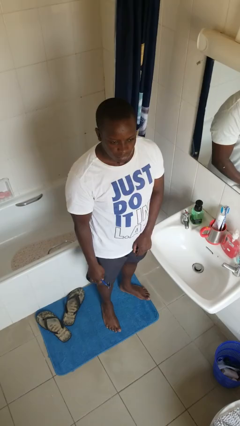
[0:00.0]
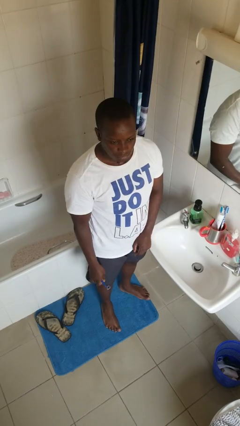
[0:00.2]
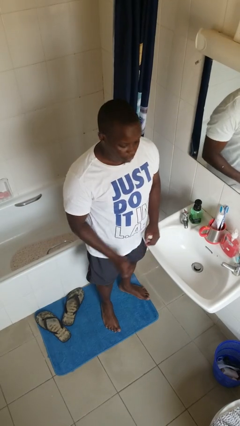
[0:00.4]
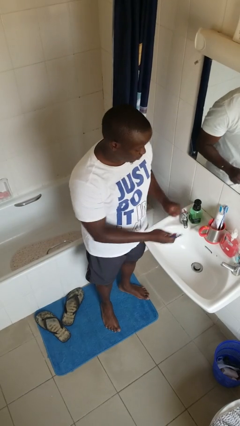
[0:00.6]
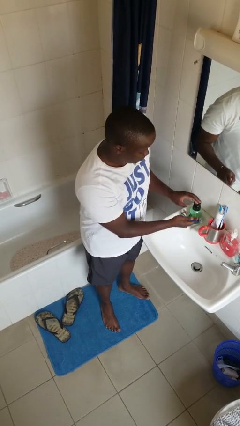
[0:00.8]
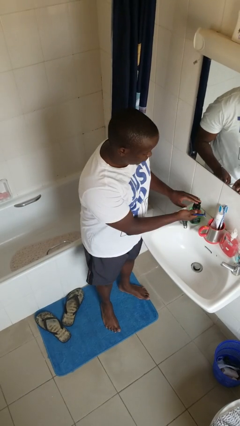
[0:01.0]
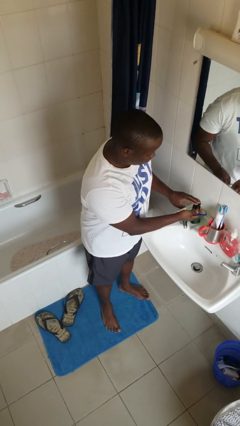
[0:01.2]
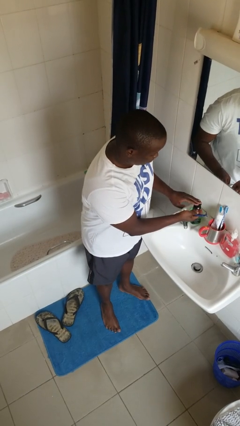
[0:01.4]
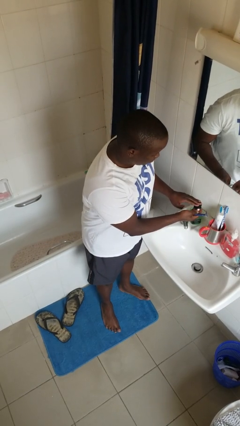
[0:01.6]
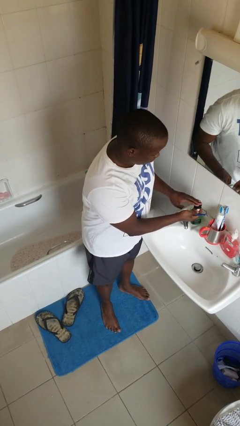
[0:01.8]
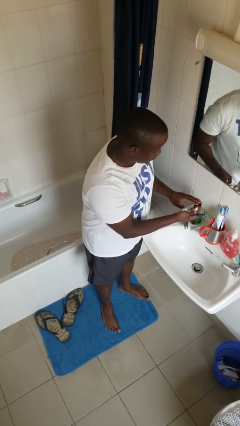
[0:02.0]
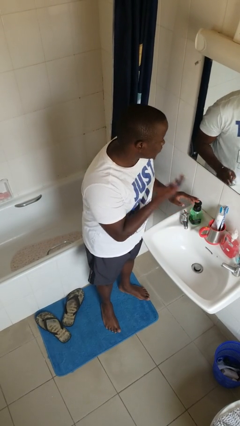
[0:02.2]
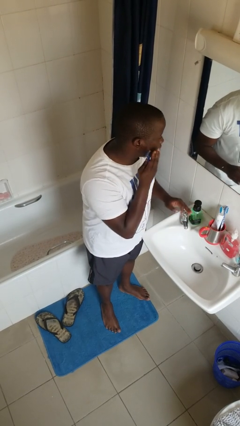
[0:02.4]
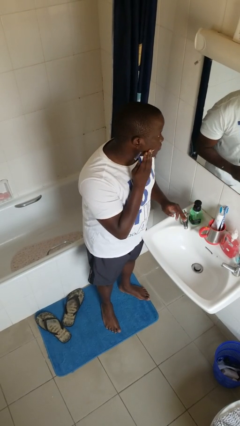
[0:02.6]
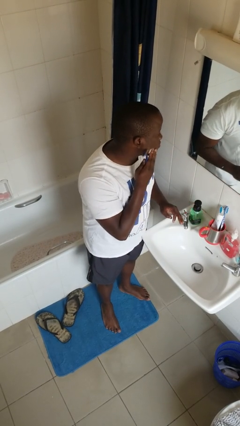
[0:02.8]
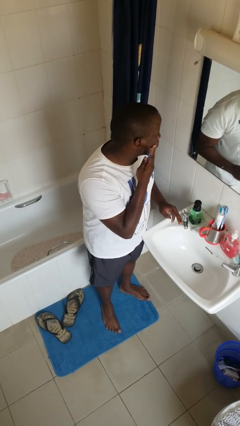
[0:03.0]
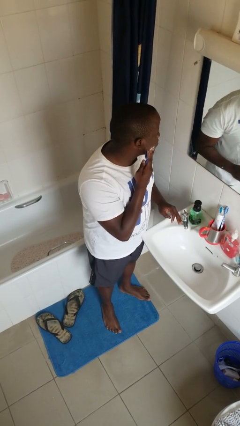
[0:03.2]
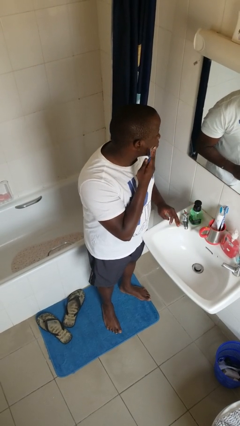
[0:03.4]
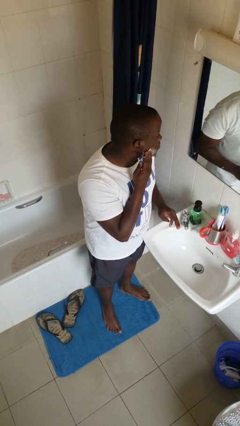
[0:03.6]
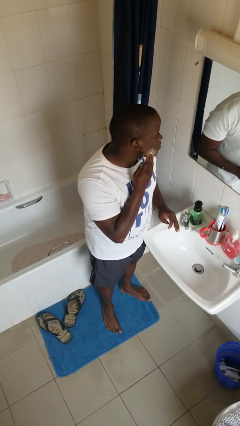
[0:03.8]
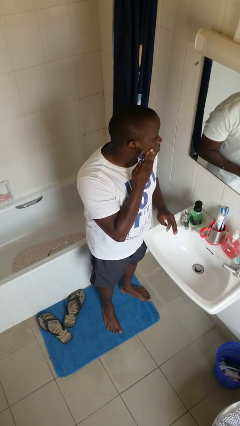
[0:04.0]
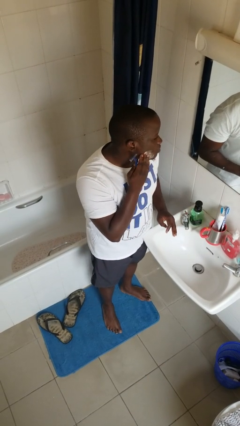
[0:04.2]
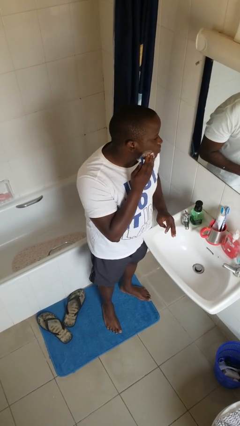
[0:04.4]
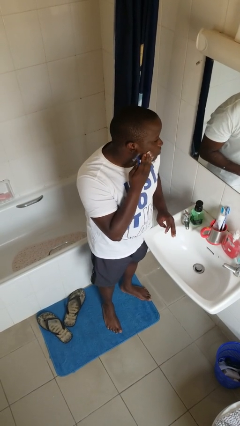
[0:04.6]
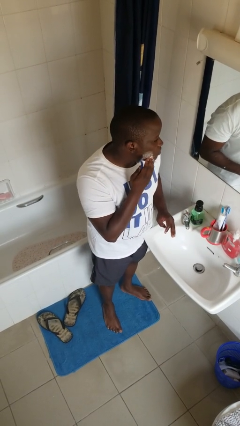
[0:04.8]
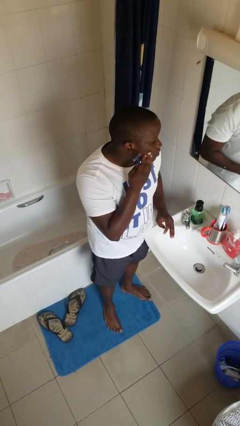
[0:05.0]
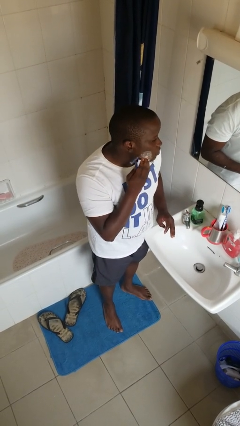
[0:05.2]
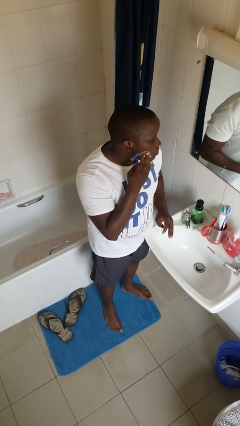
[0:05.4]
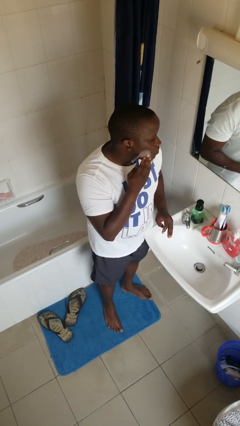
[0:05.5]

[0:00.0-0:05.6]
person applies shaving cream

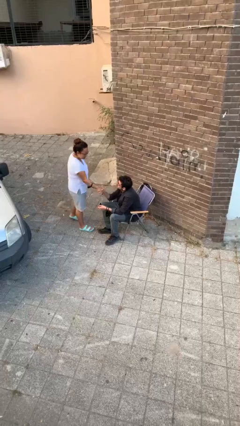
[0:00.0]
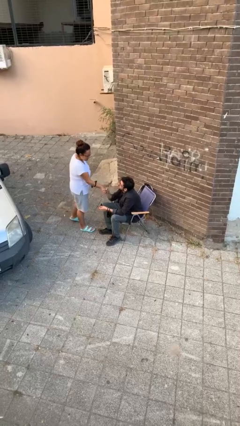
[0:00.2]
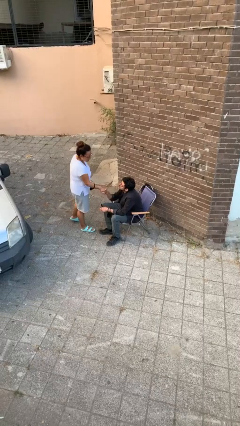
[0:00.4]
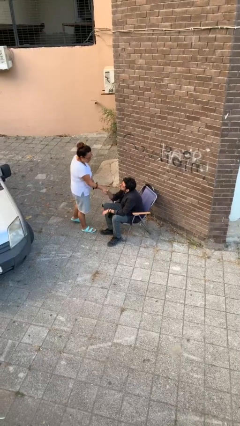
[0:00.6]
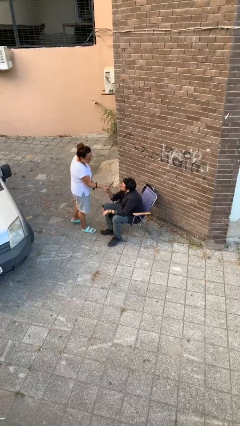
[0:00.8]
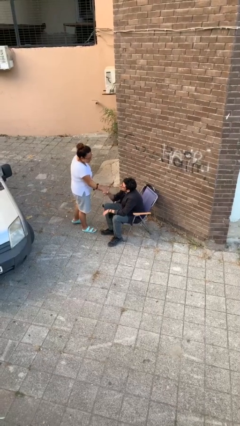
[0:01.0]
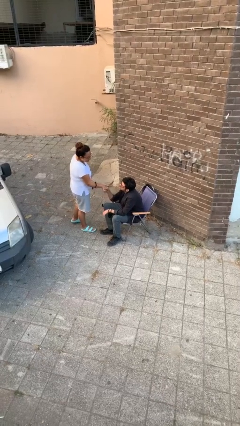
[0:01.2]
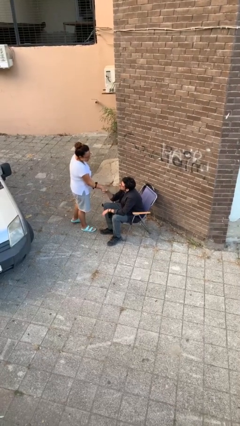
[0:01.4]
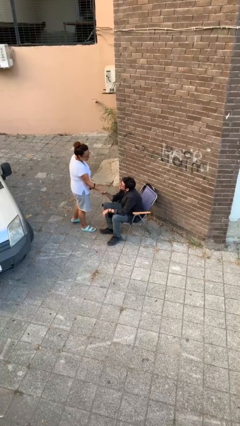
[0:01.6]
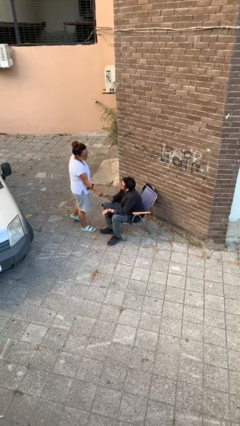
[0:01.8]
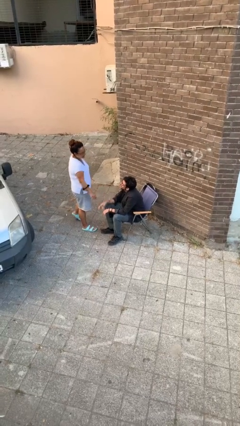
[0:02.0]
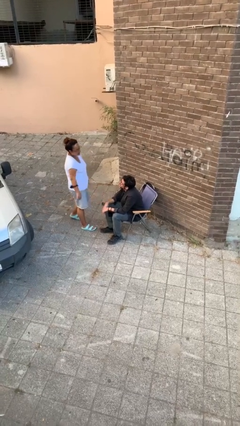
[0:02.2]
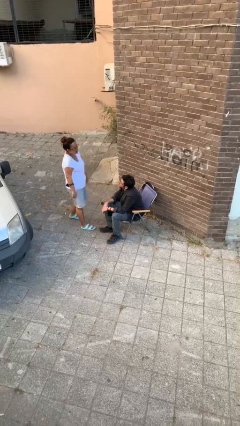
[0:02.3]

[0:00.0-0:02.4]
person shakes hand

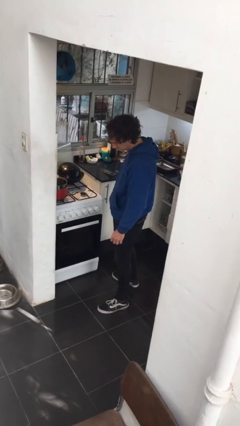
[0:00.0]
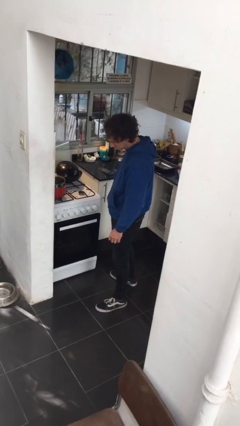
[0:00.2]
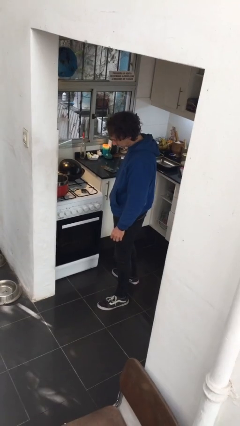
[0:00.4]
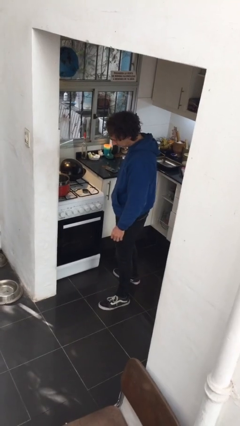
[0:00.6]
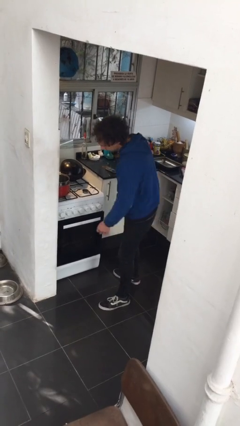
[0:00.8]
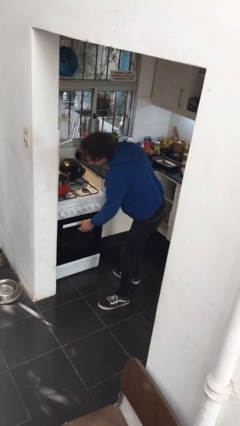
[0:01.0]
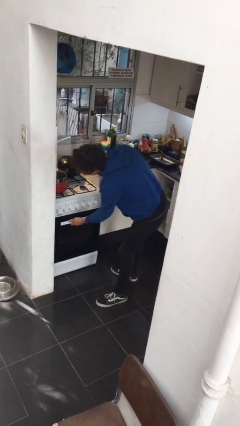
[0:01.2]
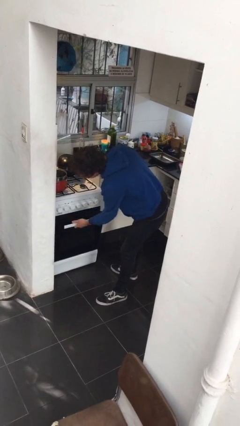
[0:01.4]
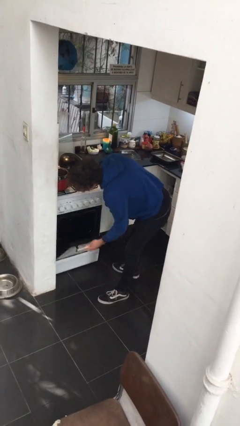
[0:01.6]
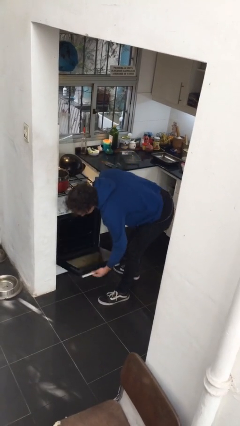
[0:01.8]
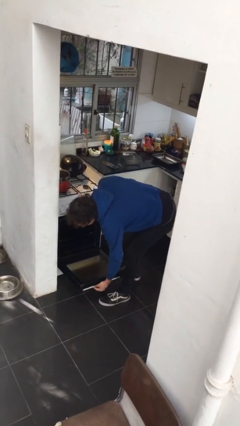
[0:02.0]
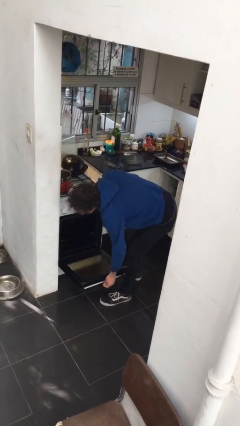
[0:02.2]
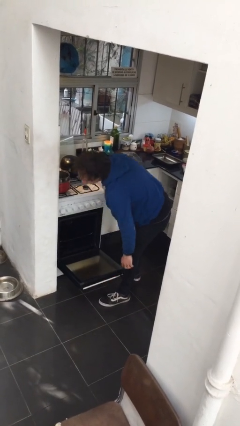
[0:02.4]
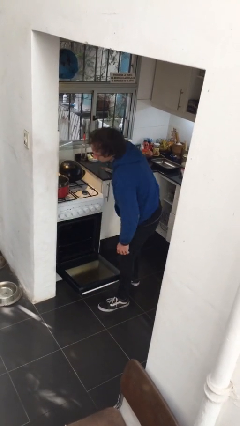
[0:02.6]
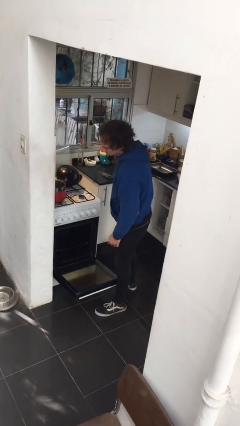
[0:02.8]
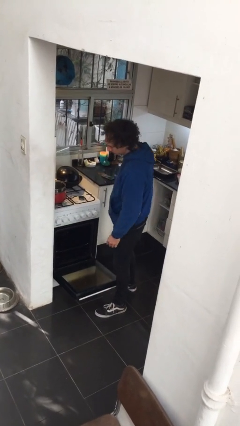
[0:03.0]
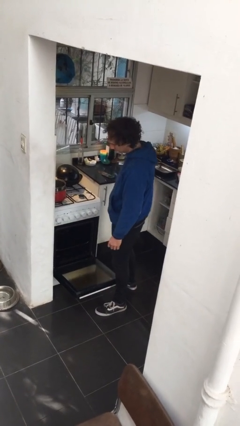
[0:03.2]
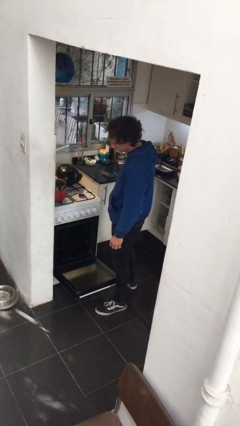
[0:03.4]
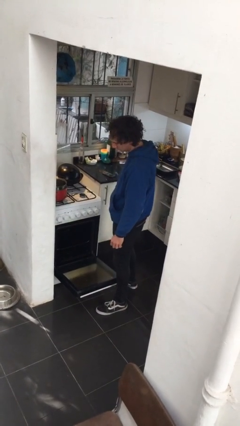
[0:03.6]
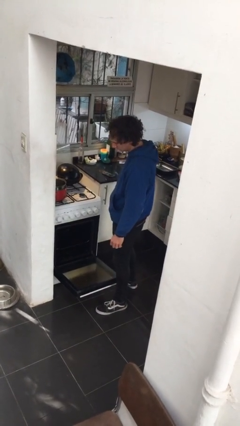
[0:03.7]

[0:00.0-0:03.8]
person opens oven door

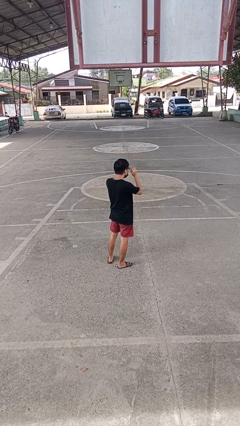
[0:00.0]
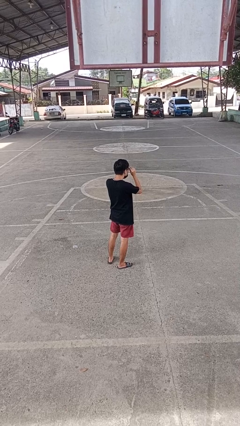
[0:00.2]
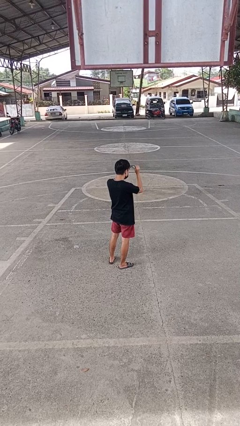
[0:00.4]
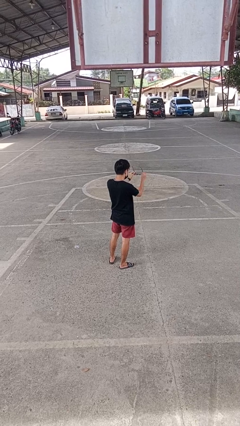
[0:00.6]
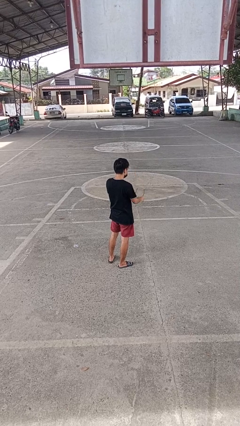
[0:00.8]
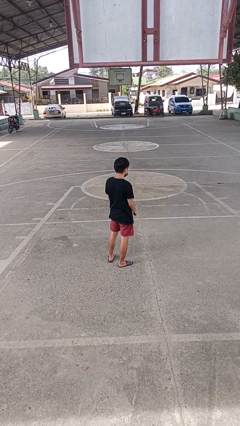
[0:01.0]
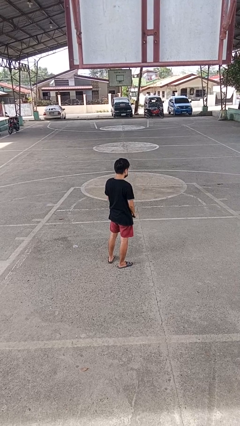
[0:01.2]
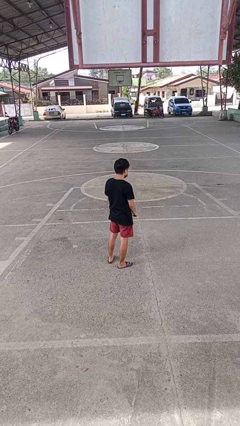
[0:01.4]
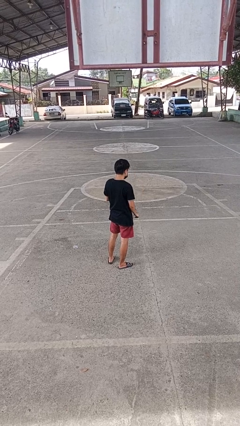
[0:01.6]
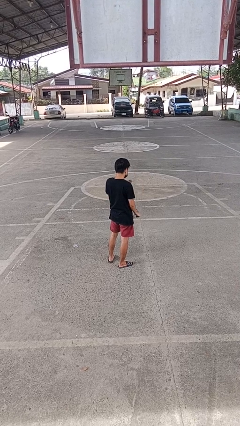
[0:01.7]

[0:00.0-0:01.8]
person takes off glasses

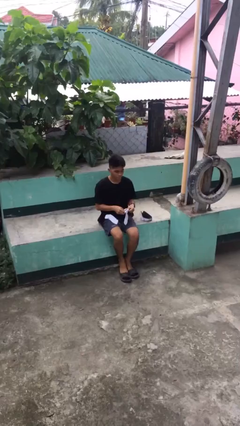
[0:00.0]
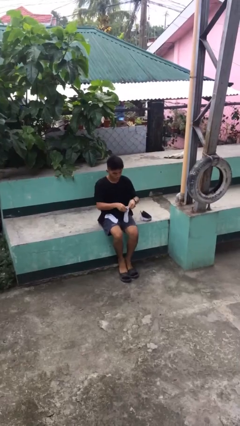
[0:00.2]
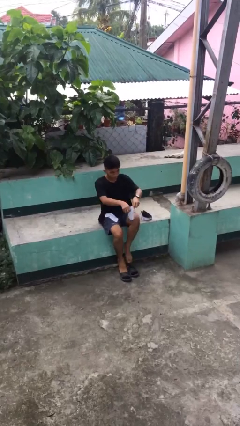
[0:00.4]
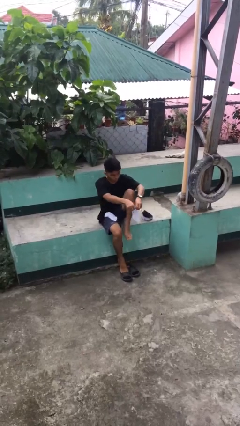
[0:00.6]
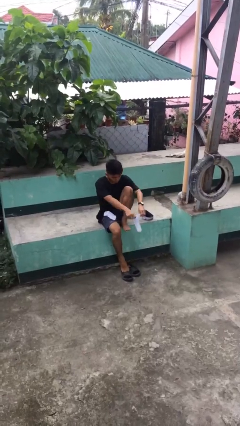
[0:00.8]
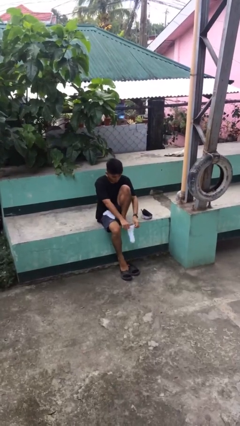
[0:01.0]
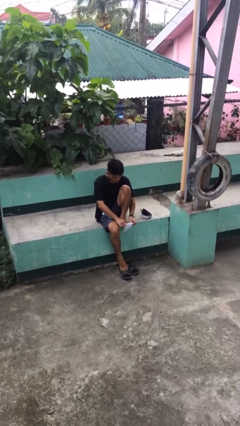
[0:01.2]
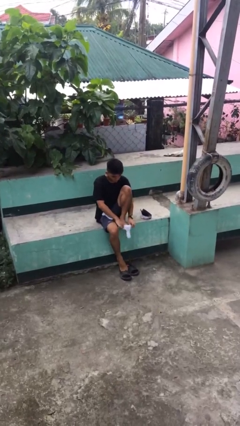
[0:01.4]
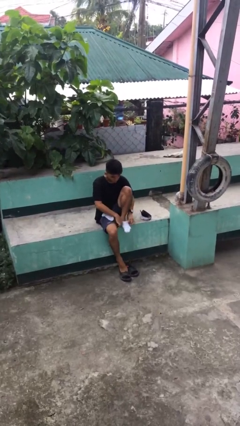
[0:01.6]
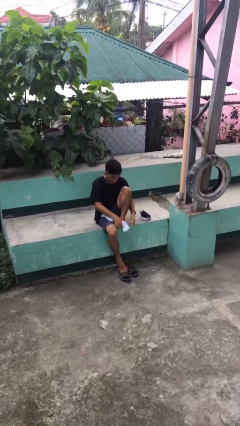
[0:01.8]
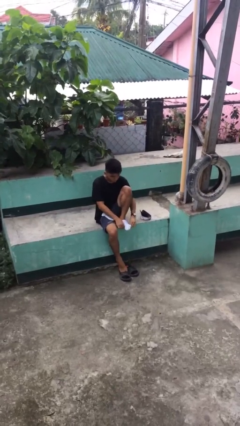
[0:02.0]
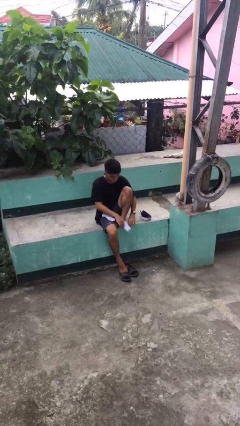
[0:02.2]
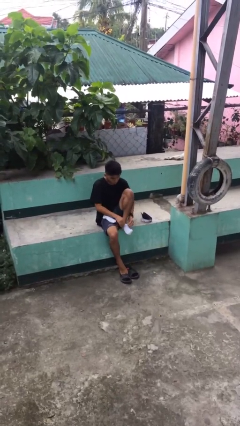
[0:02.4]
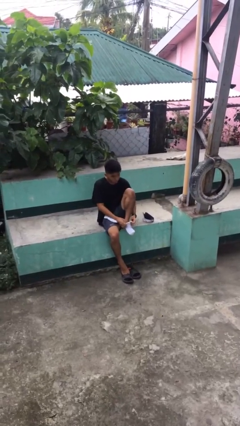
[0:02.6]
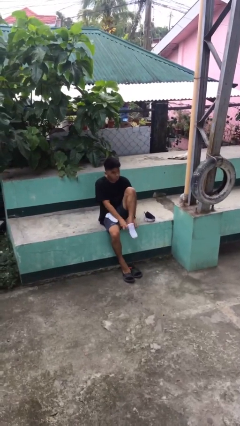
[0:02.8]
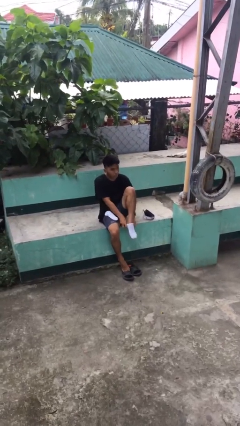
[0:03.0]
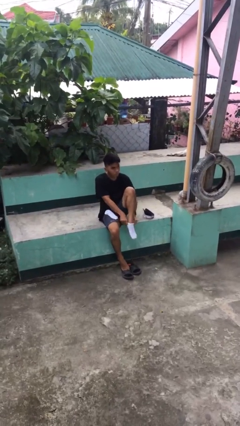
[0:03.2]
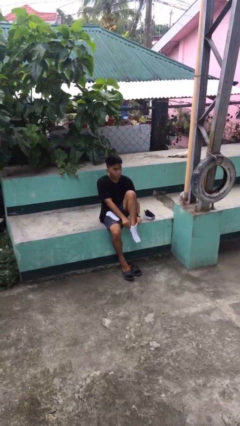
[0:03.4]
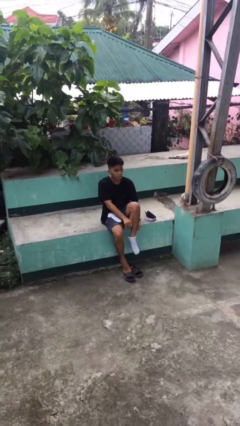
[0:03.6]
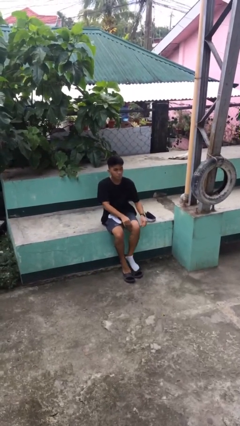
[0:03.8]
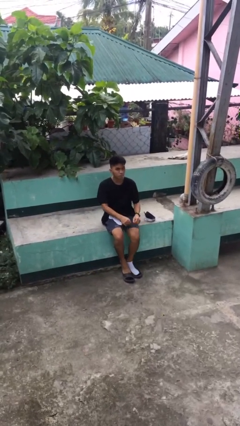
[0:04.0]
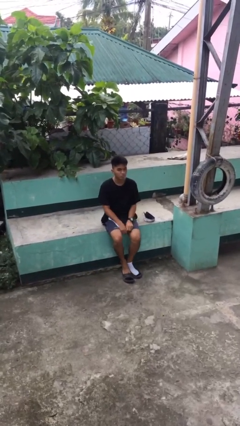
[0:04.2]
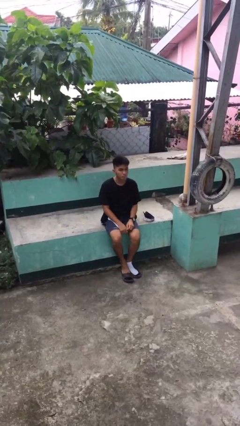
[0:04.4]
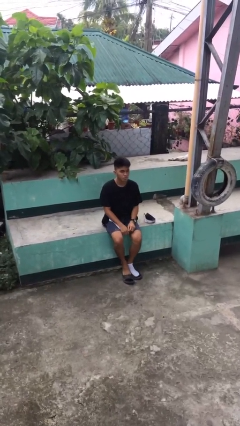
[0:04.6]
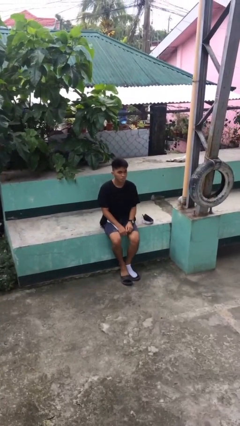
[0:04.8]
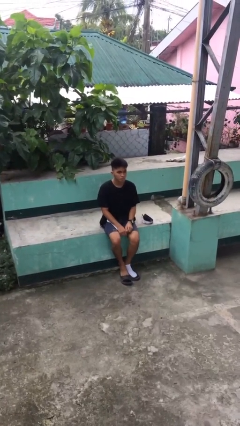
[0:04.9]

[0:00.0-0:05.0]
person puts on socks
